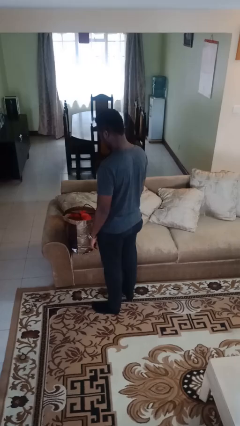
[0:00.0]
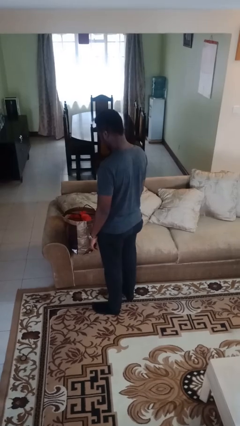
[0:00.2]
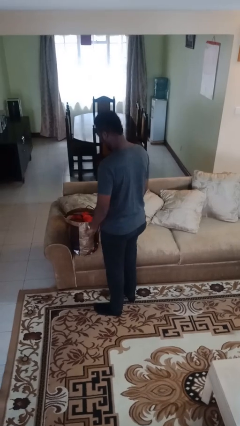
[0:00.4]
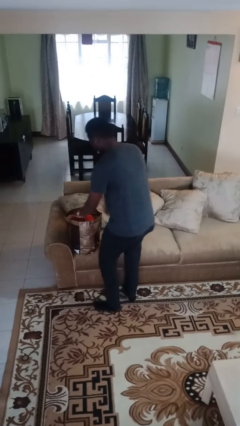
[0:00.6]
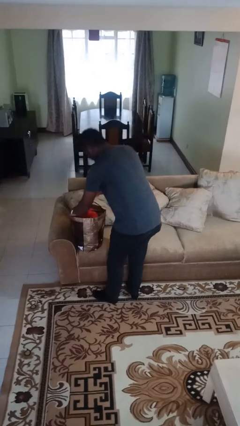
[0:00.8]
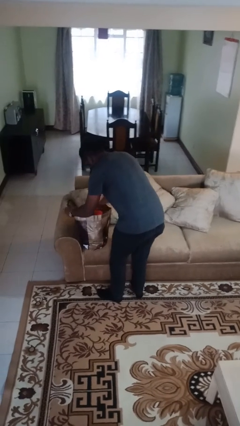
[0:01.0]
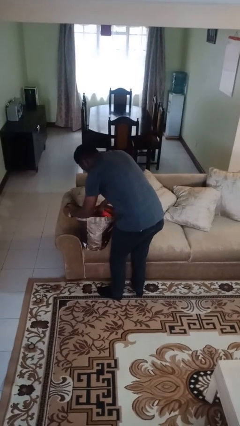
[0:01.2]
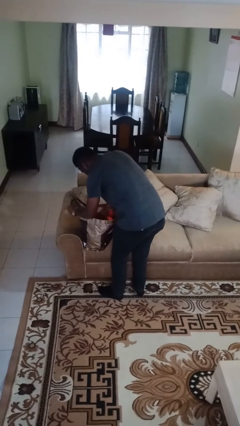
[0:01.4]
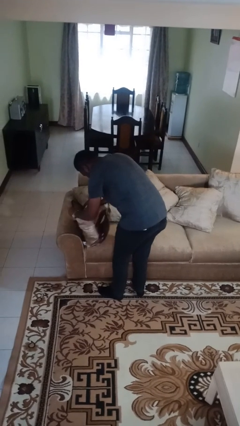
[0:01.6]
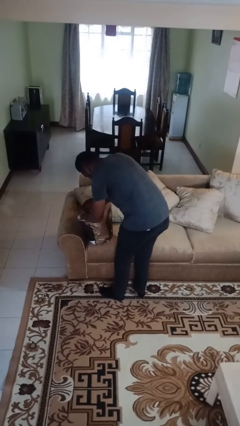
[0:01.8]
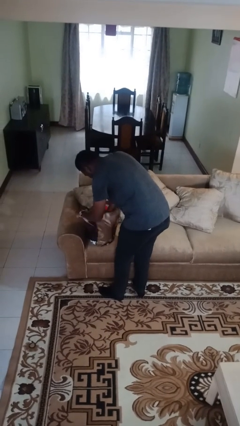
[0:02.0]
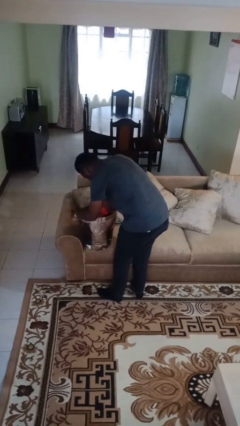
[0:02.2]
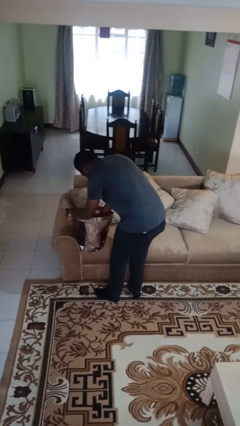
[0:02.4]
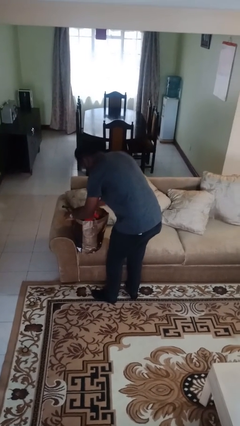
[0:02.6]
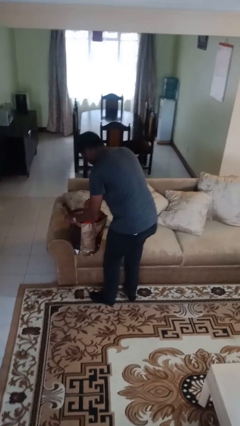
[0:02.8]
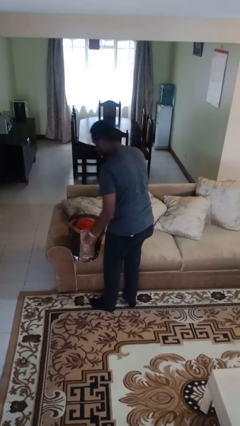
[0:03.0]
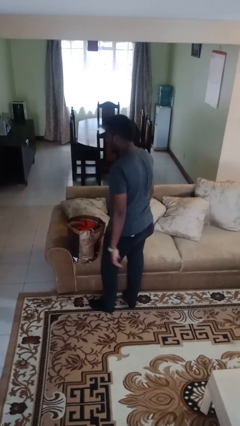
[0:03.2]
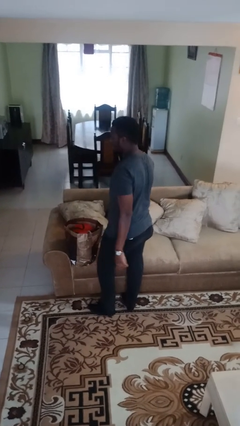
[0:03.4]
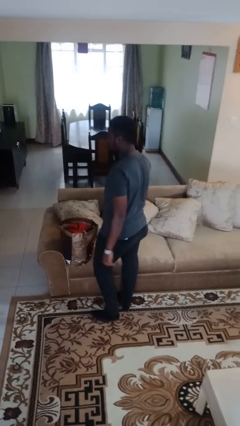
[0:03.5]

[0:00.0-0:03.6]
person searches in bag

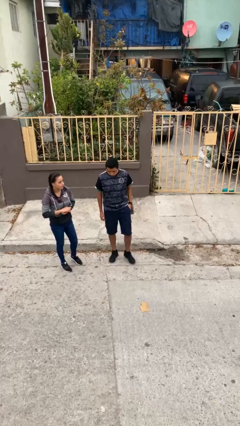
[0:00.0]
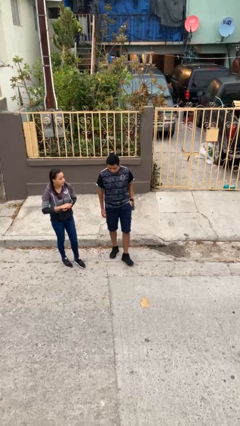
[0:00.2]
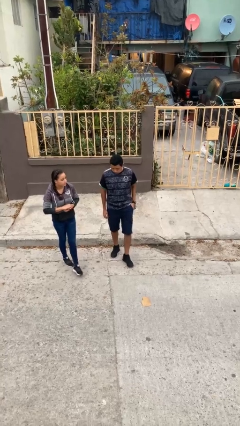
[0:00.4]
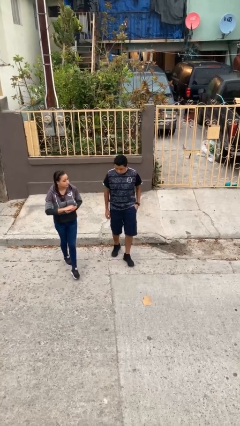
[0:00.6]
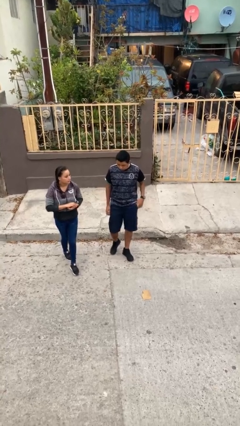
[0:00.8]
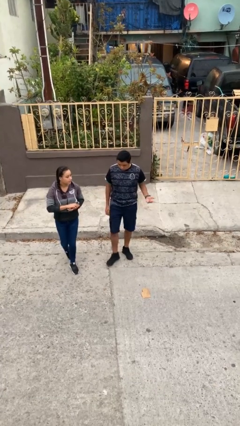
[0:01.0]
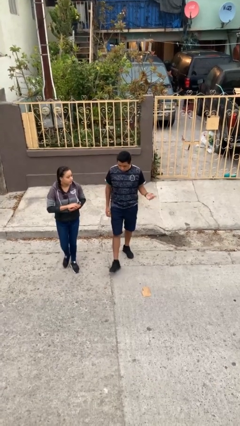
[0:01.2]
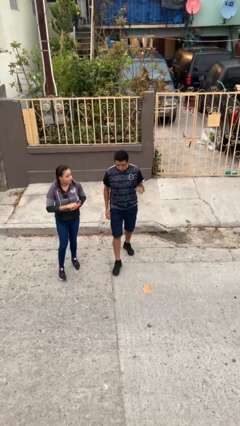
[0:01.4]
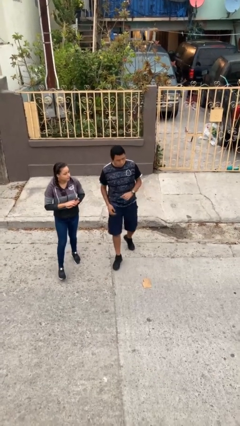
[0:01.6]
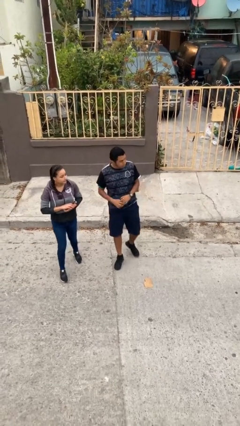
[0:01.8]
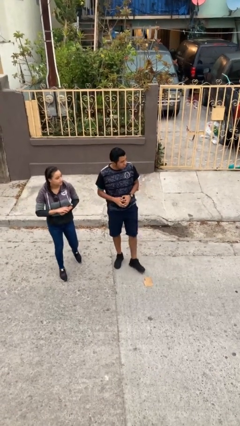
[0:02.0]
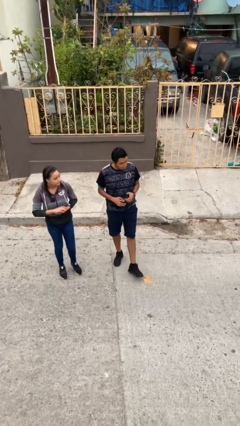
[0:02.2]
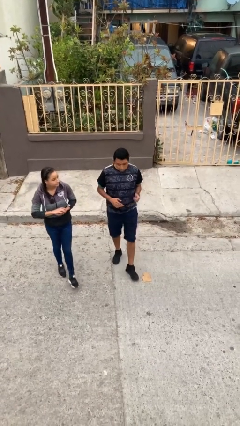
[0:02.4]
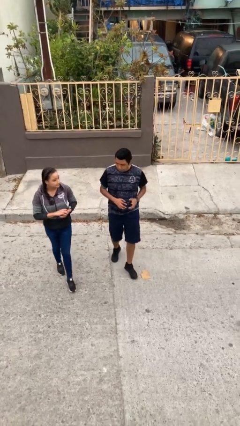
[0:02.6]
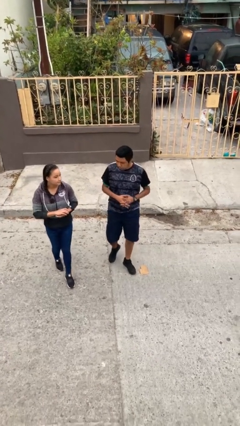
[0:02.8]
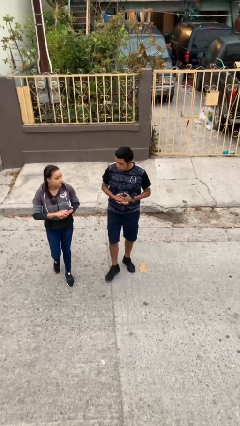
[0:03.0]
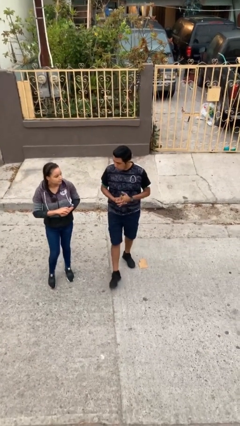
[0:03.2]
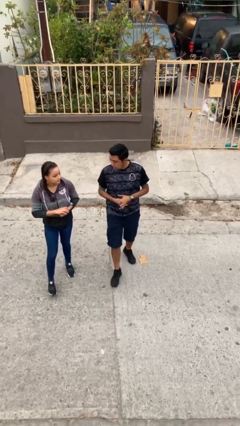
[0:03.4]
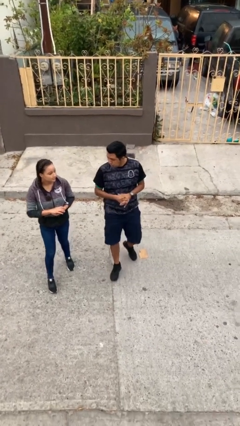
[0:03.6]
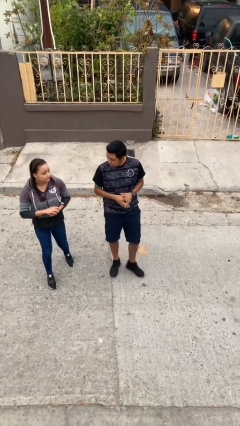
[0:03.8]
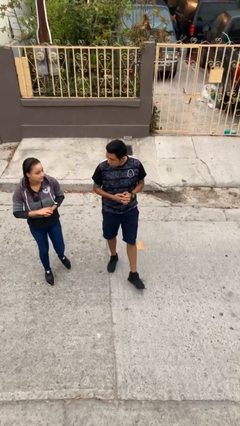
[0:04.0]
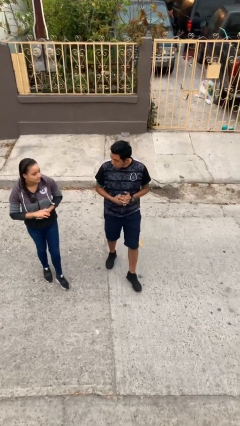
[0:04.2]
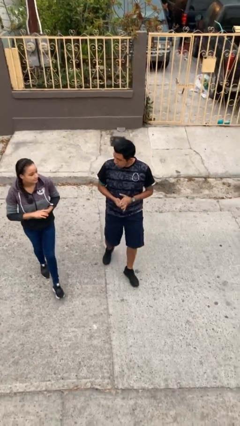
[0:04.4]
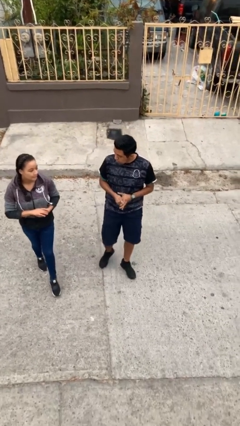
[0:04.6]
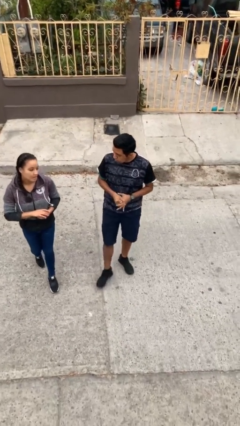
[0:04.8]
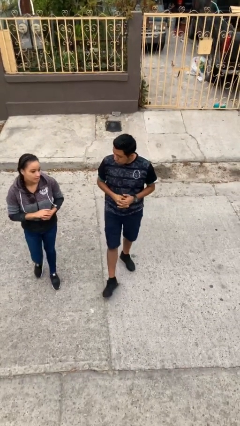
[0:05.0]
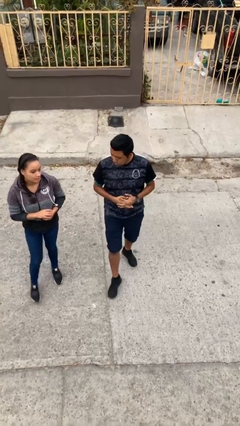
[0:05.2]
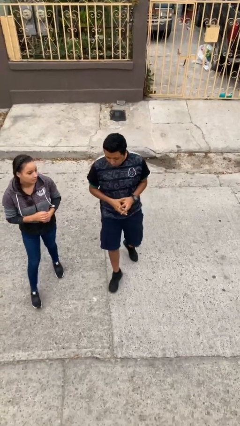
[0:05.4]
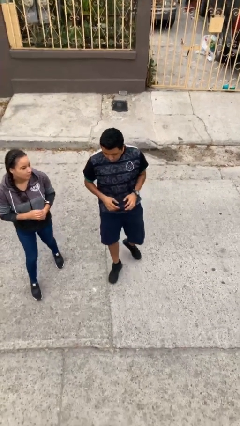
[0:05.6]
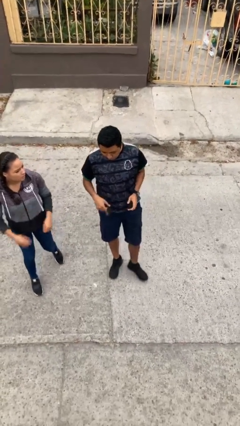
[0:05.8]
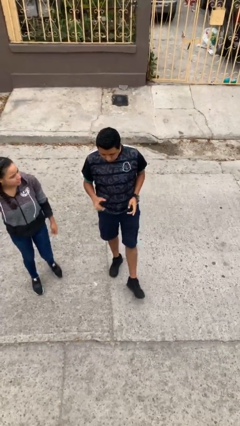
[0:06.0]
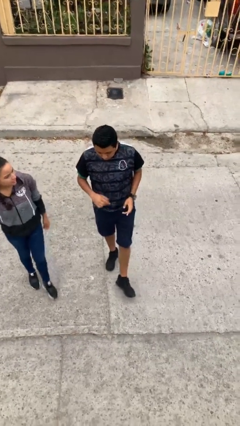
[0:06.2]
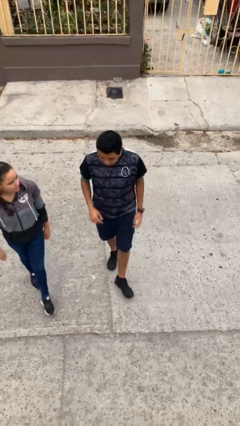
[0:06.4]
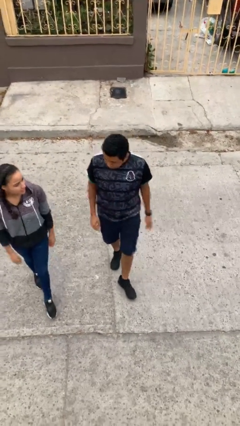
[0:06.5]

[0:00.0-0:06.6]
person talks to person

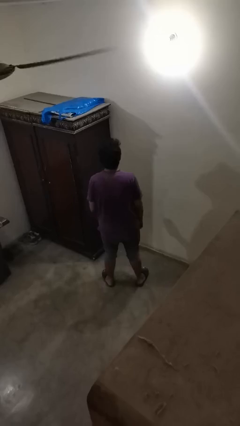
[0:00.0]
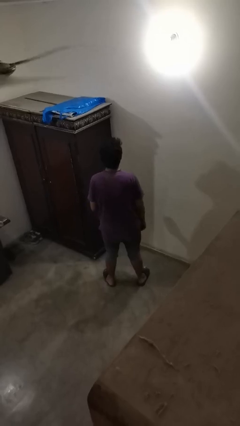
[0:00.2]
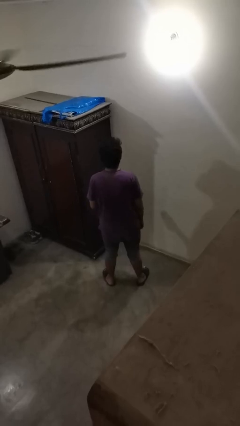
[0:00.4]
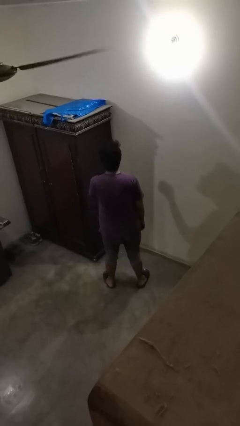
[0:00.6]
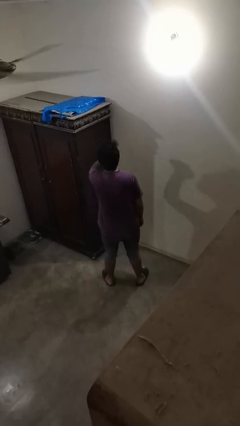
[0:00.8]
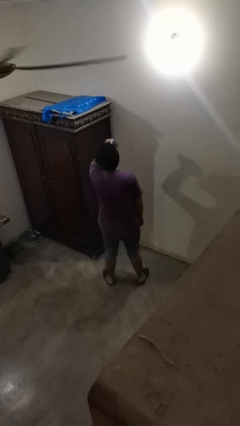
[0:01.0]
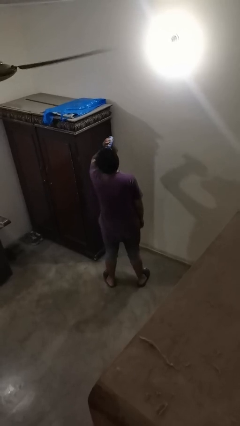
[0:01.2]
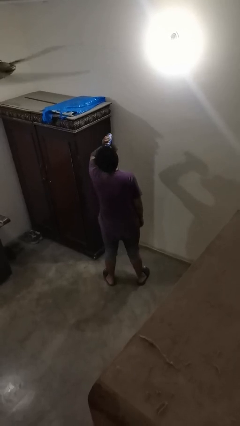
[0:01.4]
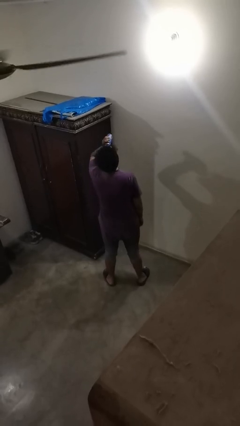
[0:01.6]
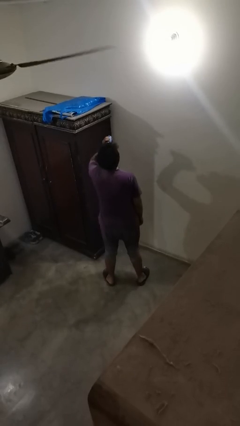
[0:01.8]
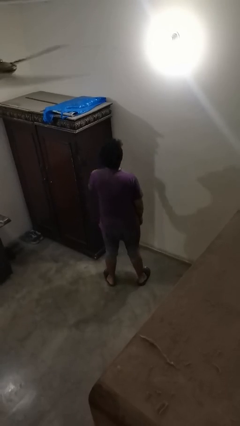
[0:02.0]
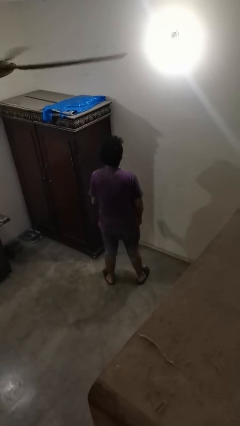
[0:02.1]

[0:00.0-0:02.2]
person drinks from beverage can

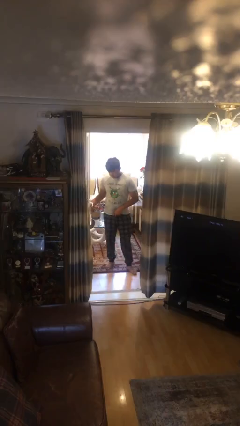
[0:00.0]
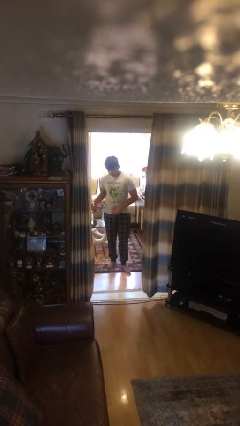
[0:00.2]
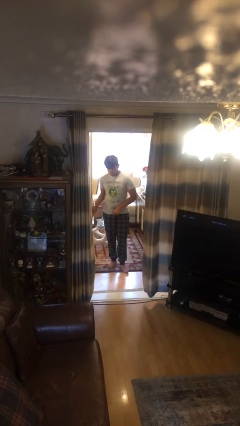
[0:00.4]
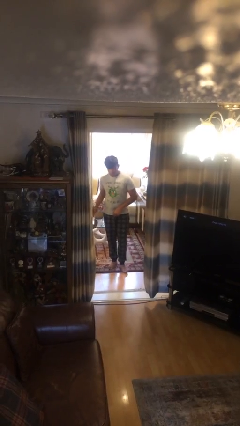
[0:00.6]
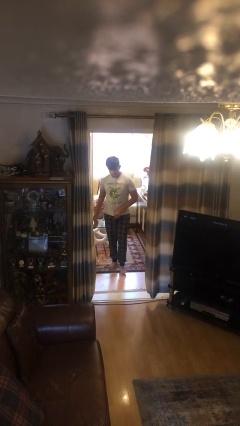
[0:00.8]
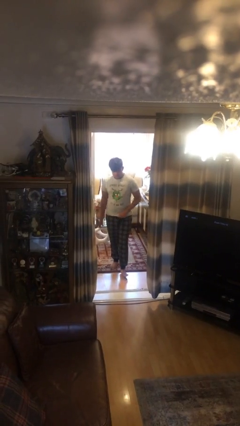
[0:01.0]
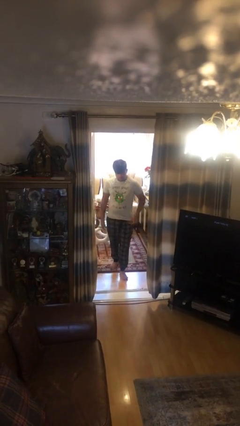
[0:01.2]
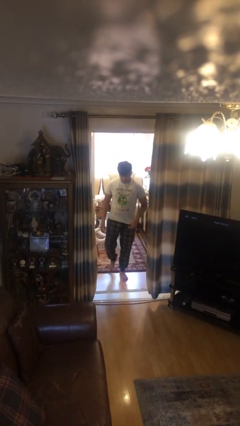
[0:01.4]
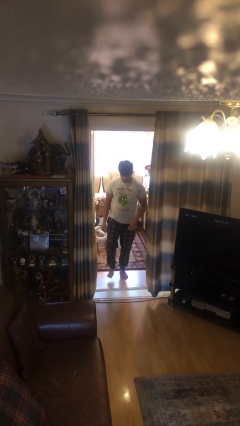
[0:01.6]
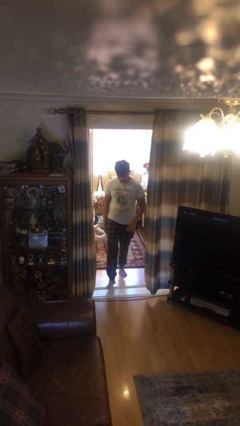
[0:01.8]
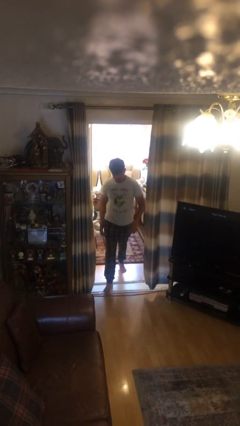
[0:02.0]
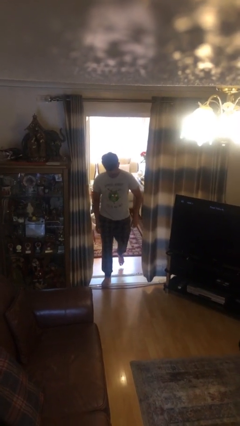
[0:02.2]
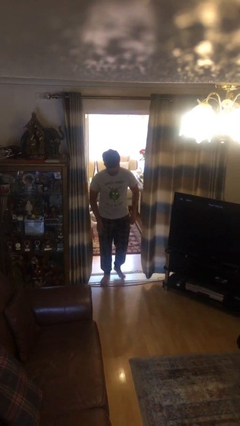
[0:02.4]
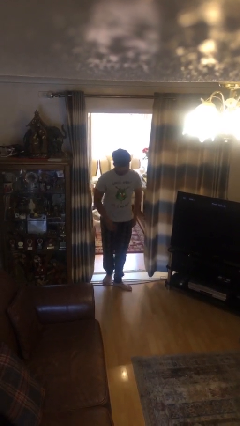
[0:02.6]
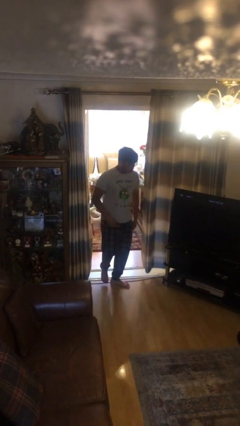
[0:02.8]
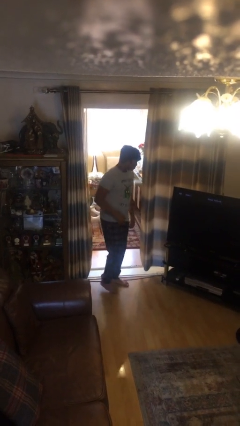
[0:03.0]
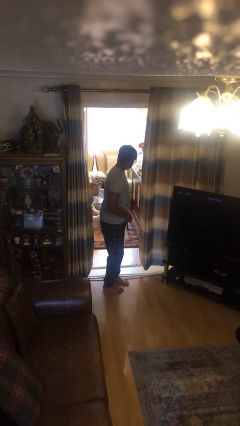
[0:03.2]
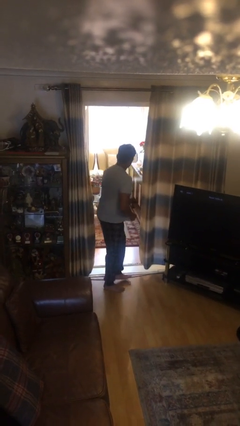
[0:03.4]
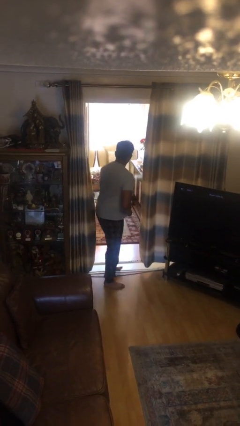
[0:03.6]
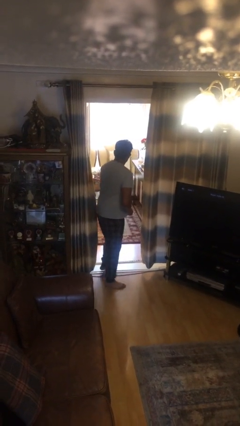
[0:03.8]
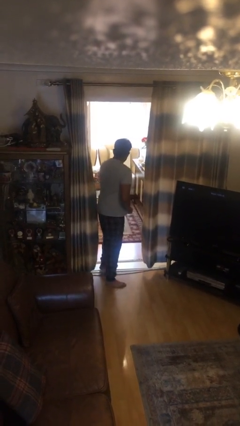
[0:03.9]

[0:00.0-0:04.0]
person enters scene through structure

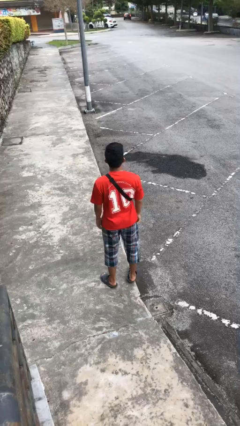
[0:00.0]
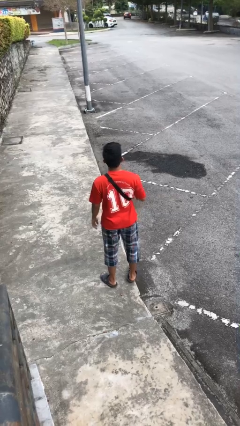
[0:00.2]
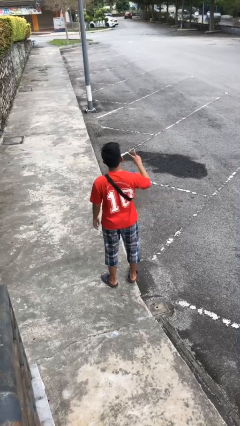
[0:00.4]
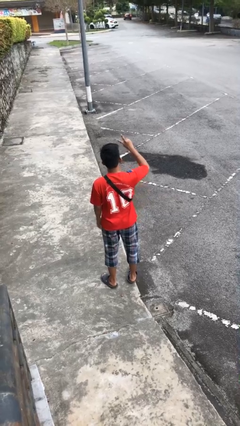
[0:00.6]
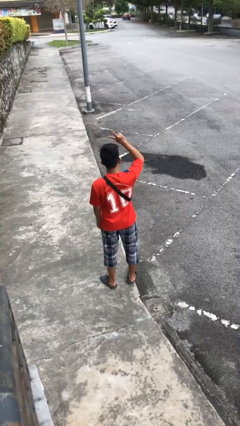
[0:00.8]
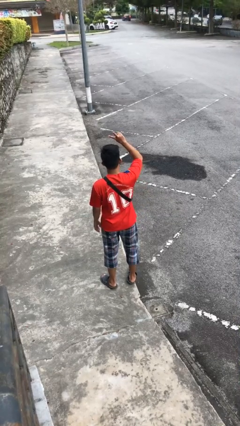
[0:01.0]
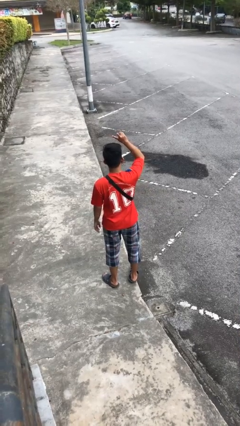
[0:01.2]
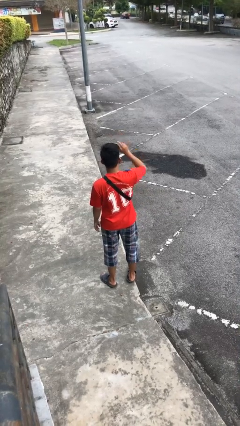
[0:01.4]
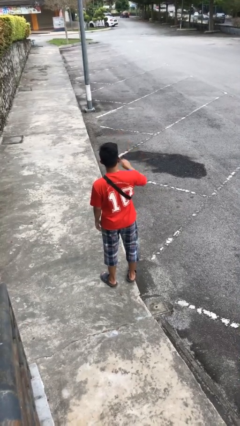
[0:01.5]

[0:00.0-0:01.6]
person gestures peace
